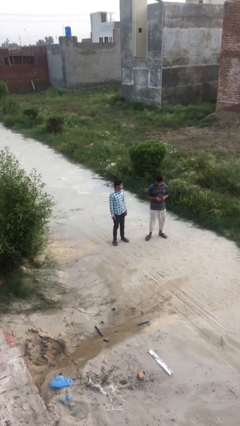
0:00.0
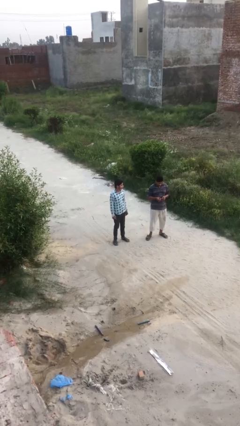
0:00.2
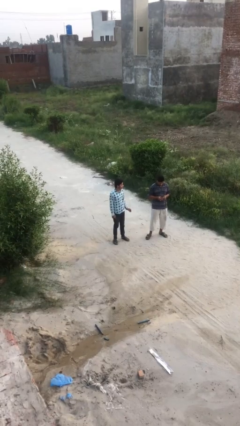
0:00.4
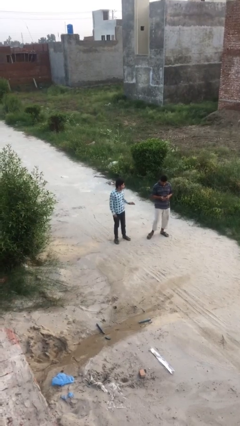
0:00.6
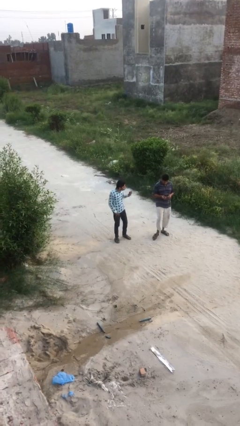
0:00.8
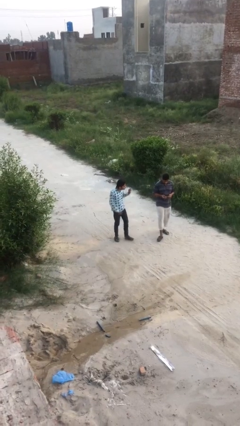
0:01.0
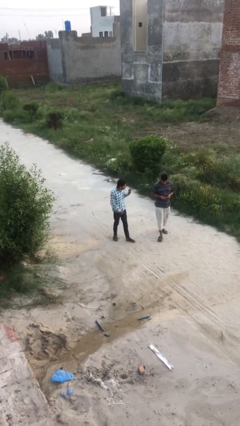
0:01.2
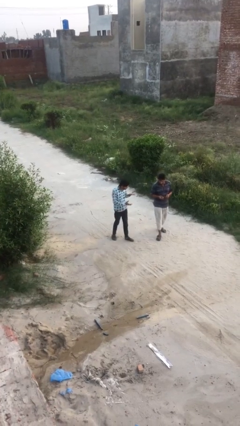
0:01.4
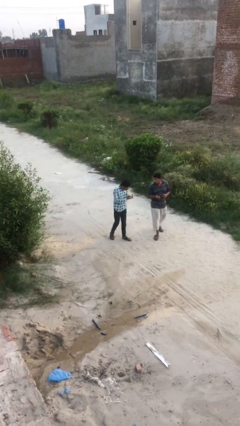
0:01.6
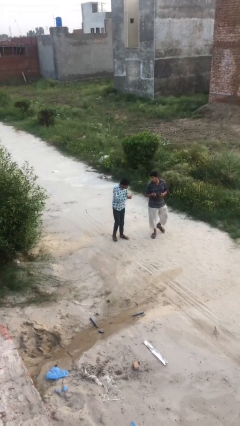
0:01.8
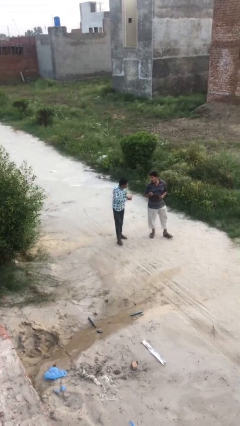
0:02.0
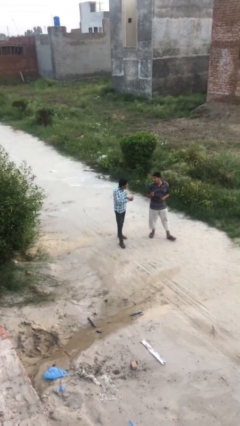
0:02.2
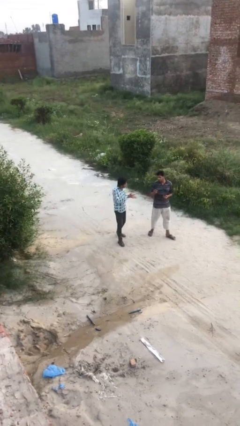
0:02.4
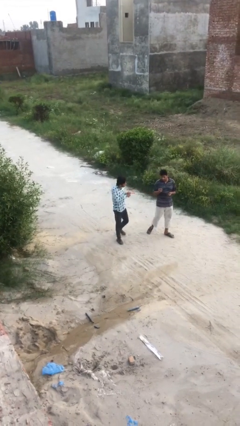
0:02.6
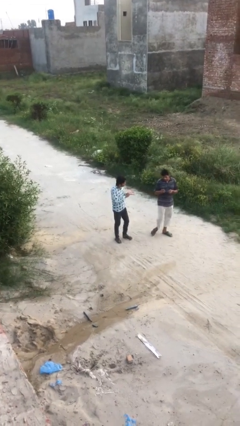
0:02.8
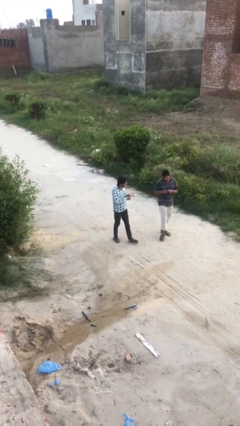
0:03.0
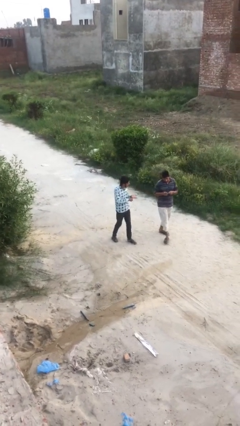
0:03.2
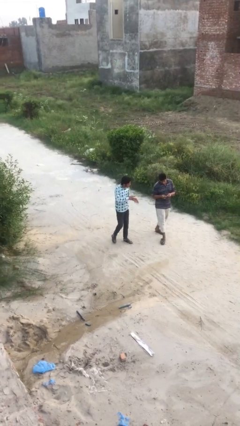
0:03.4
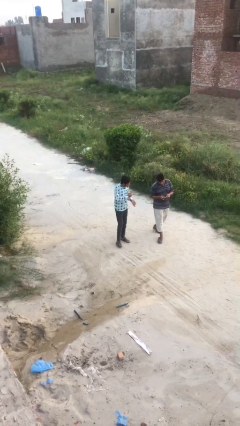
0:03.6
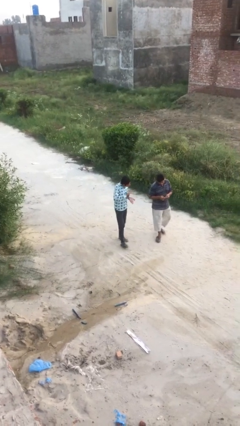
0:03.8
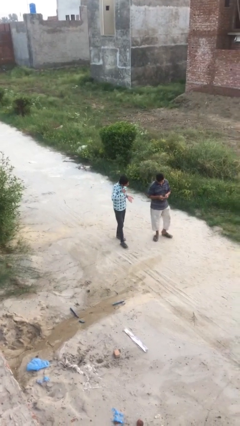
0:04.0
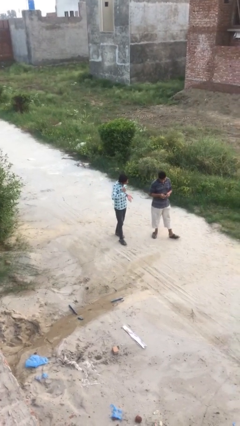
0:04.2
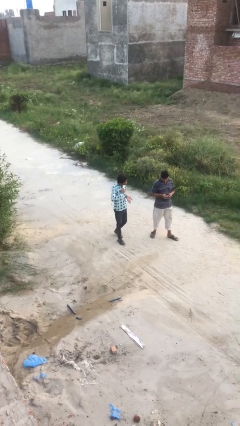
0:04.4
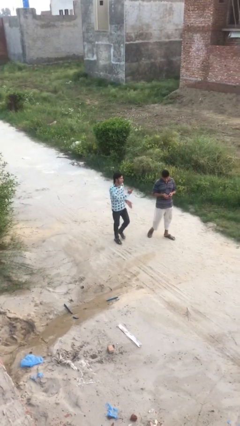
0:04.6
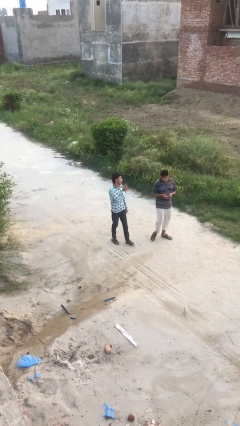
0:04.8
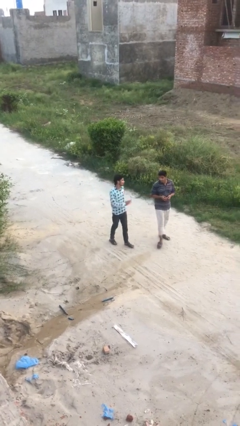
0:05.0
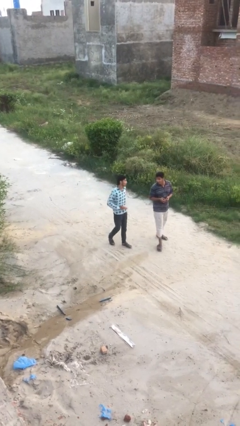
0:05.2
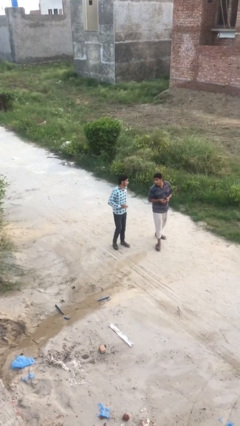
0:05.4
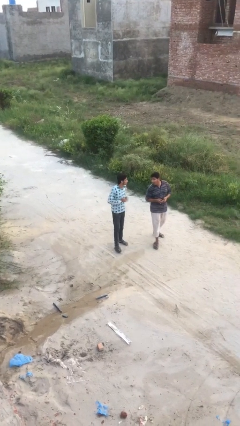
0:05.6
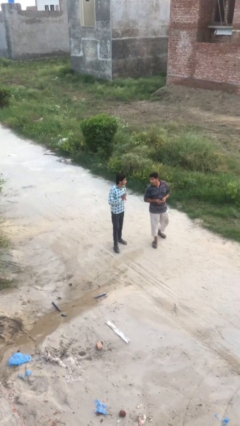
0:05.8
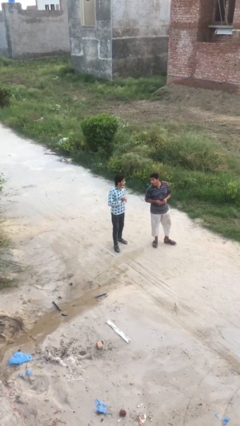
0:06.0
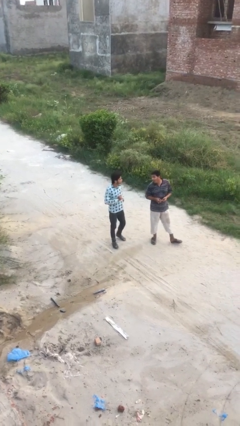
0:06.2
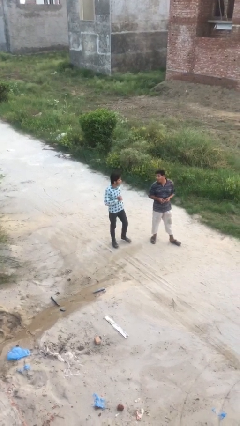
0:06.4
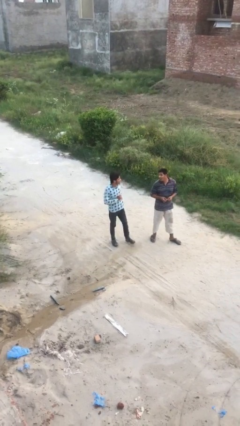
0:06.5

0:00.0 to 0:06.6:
person talks to person

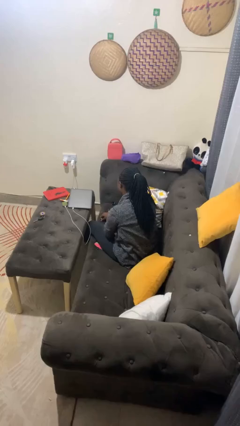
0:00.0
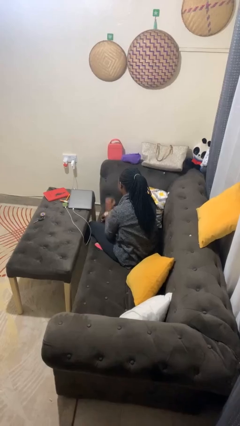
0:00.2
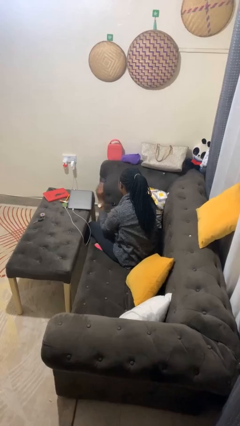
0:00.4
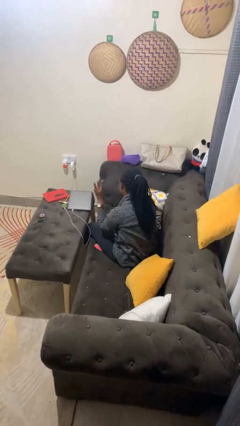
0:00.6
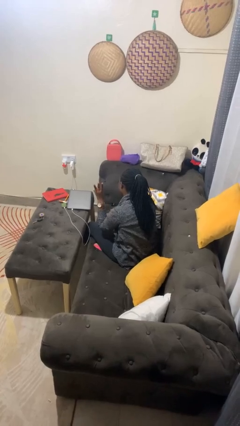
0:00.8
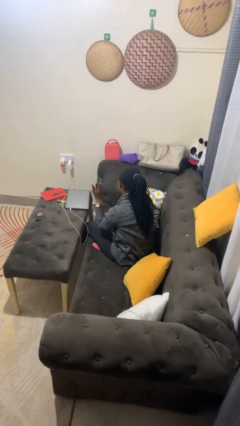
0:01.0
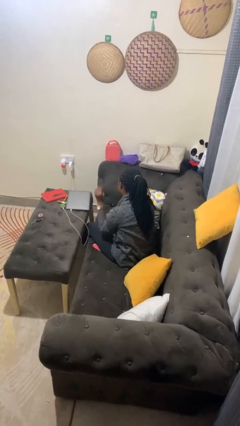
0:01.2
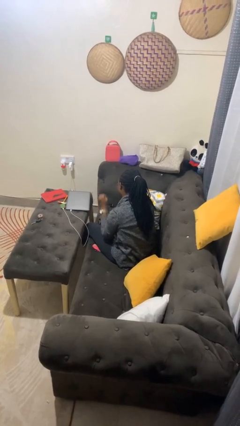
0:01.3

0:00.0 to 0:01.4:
person gestures number three

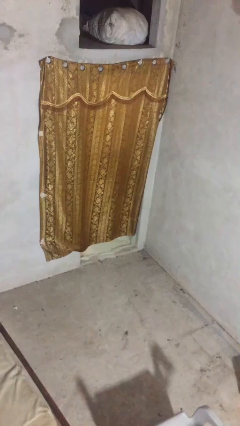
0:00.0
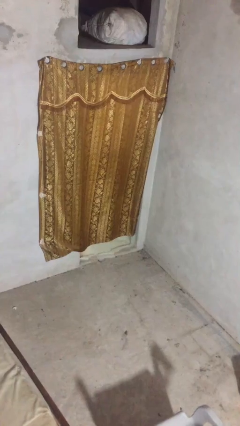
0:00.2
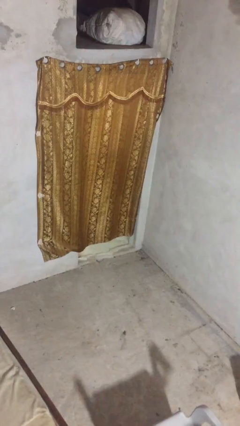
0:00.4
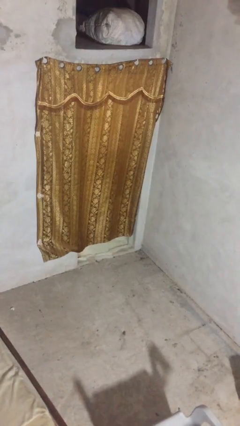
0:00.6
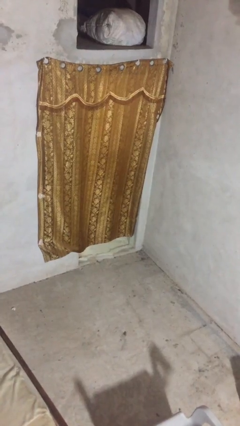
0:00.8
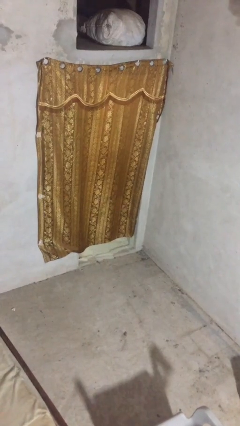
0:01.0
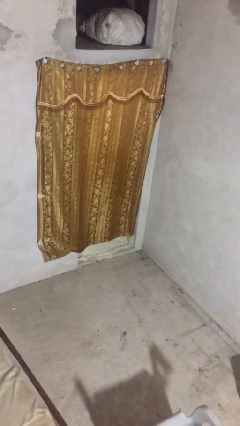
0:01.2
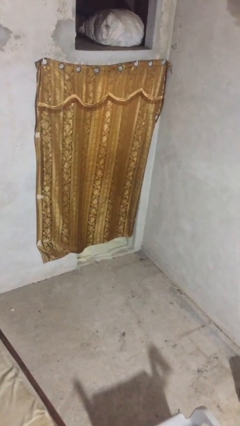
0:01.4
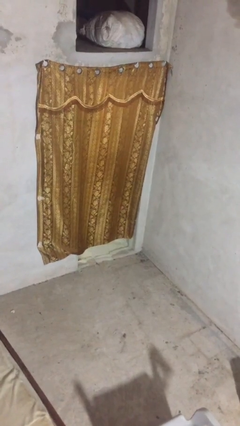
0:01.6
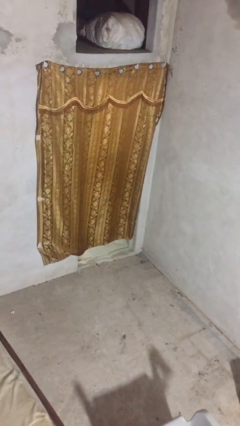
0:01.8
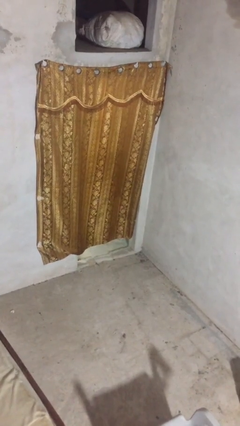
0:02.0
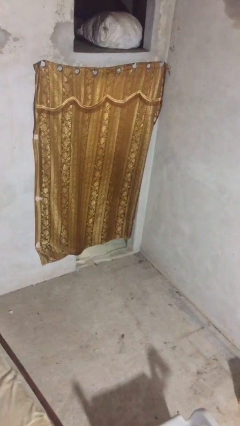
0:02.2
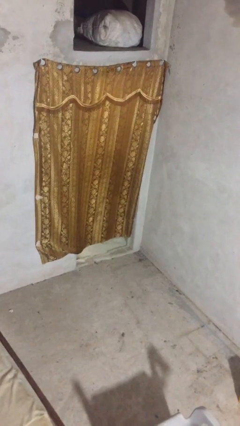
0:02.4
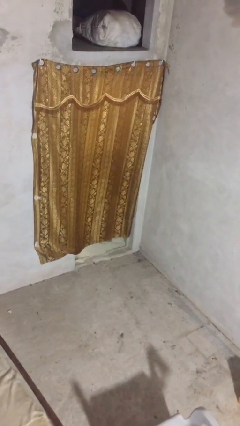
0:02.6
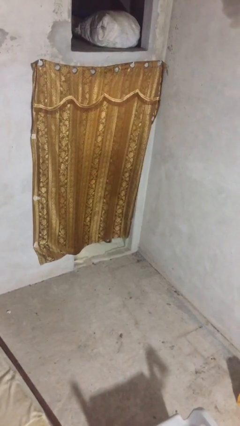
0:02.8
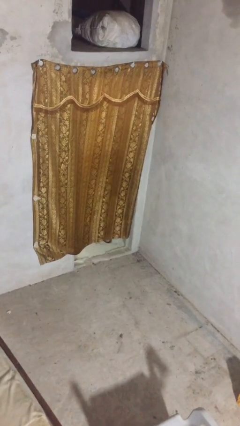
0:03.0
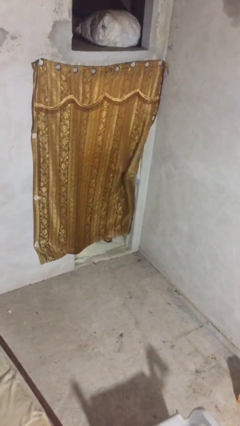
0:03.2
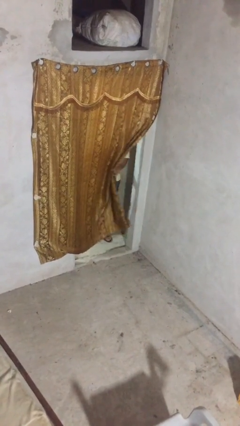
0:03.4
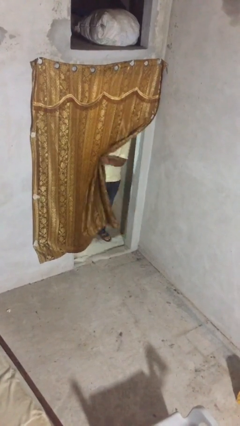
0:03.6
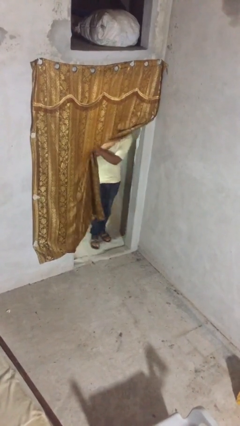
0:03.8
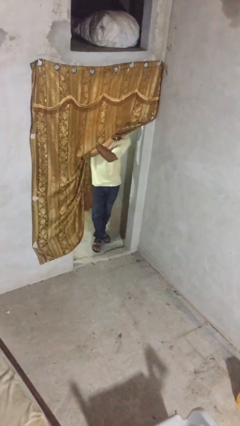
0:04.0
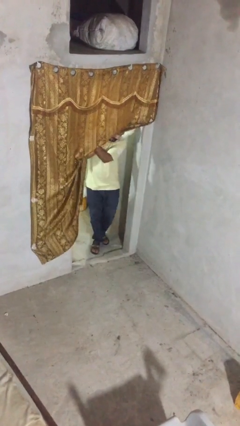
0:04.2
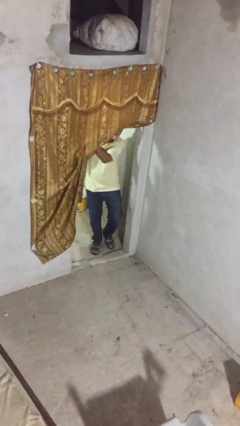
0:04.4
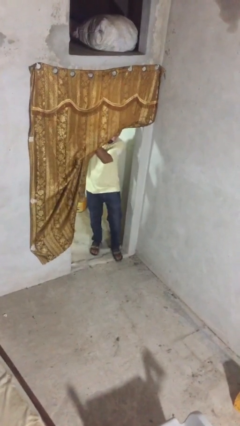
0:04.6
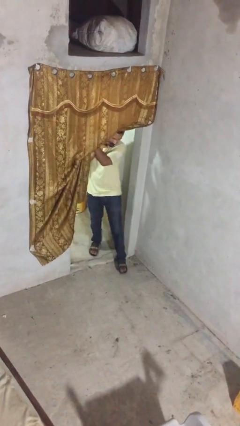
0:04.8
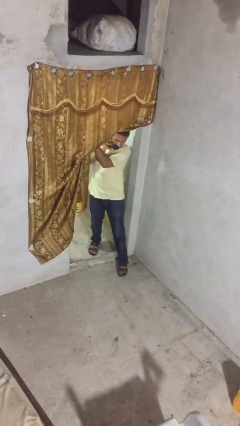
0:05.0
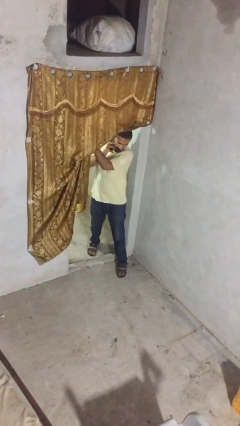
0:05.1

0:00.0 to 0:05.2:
person opens facility door

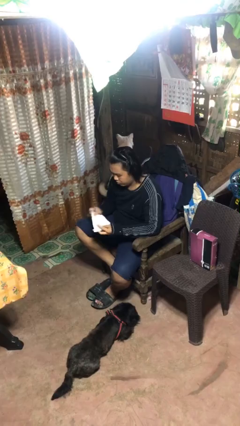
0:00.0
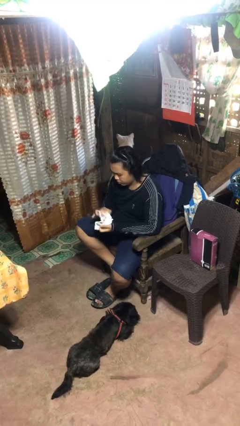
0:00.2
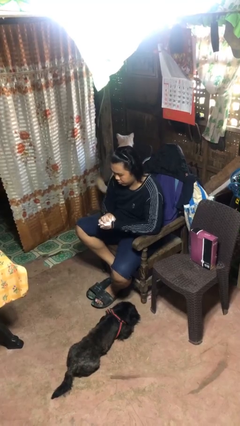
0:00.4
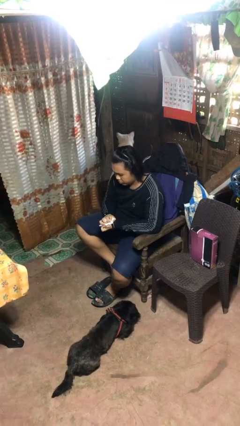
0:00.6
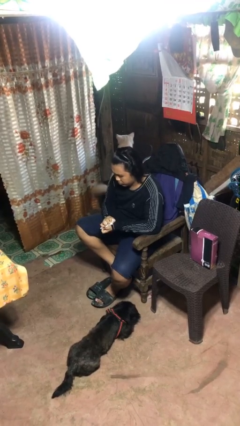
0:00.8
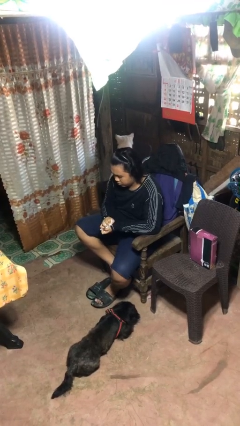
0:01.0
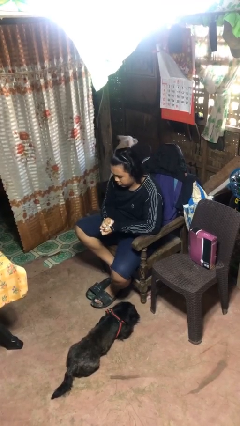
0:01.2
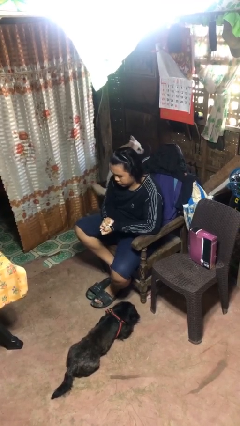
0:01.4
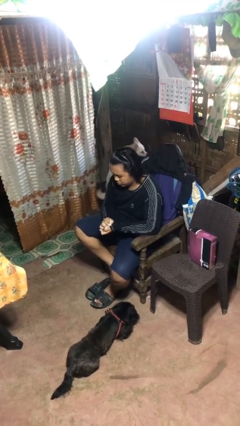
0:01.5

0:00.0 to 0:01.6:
person crumples paper

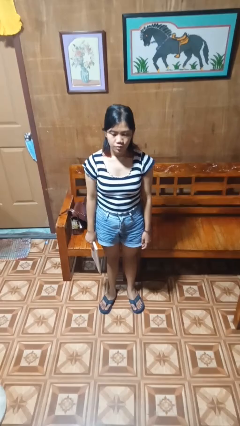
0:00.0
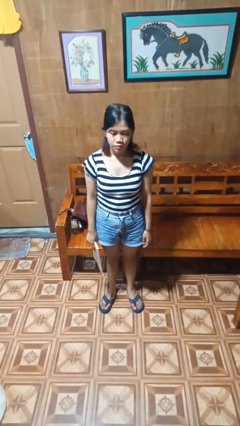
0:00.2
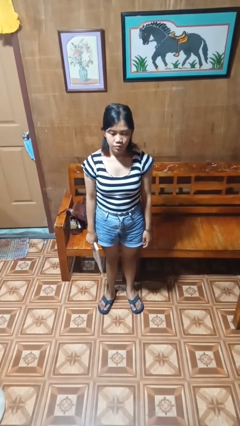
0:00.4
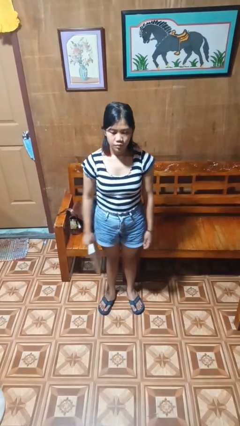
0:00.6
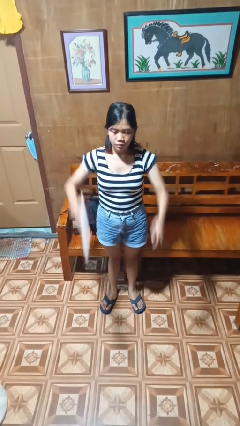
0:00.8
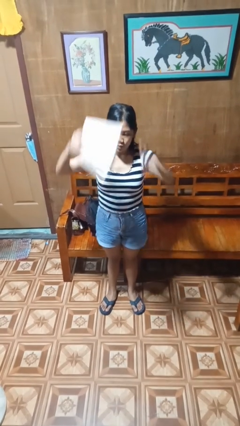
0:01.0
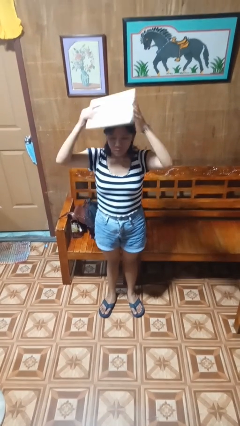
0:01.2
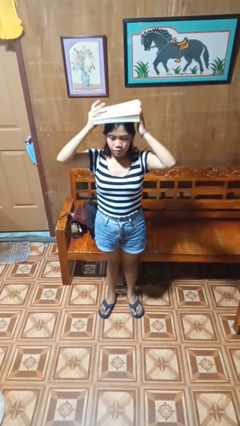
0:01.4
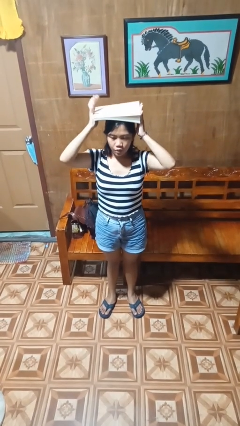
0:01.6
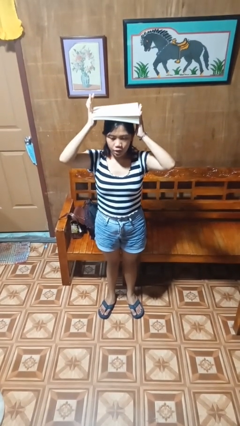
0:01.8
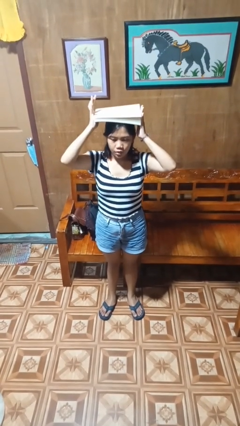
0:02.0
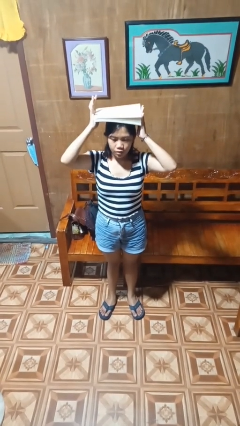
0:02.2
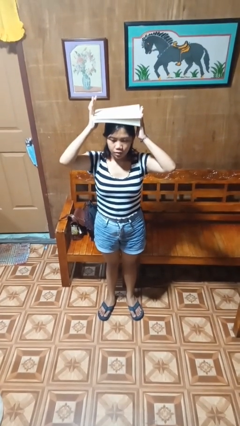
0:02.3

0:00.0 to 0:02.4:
person holds object above head

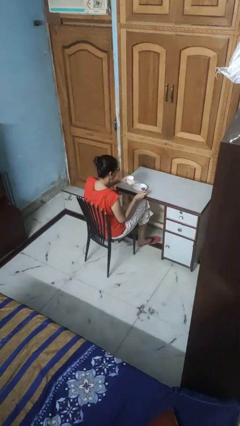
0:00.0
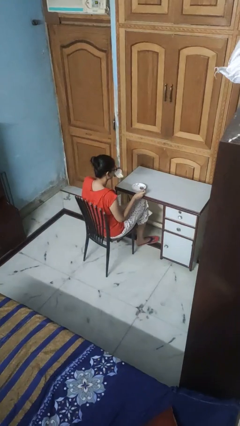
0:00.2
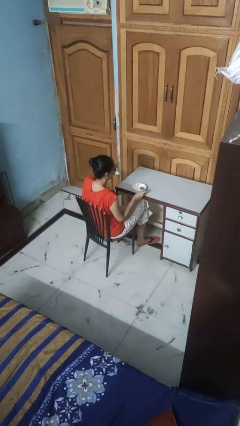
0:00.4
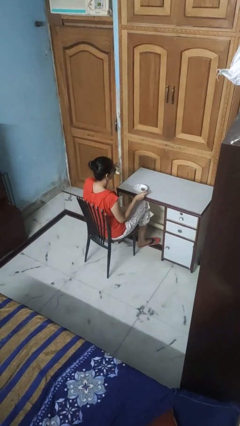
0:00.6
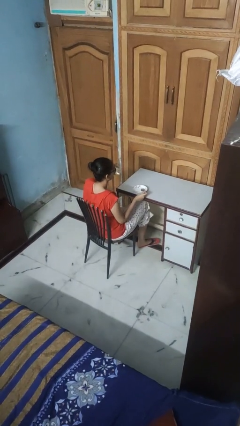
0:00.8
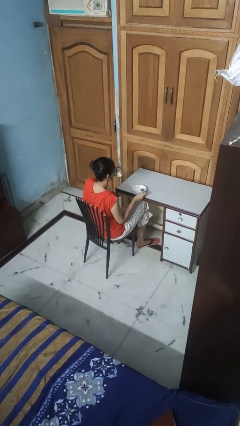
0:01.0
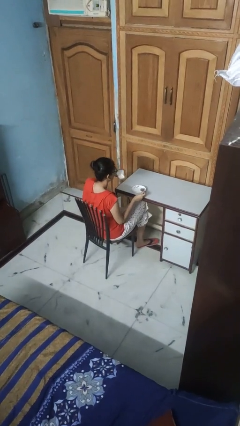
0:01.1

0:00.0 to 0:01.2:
person drinks from mug
